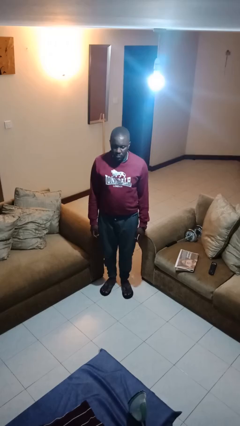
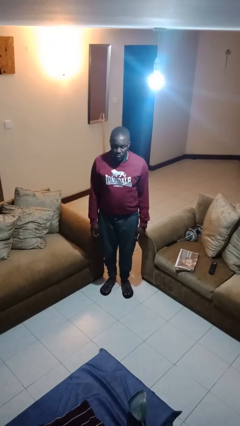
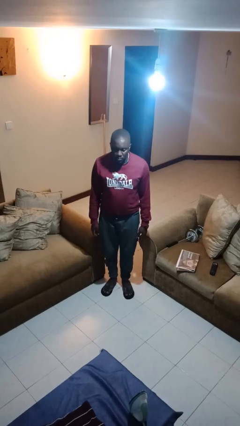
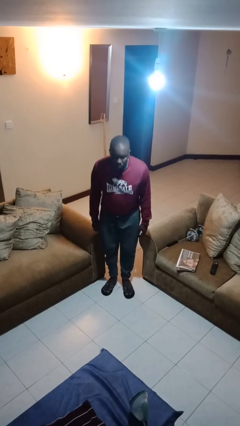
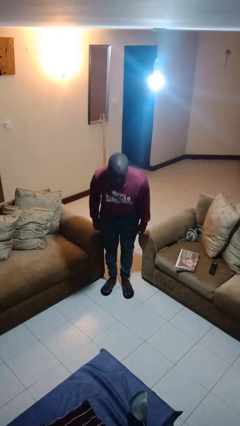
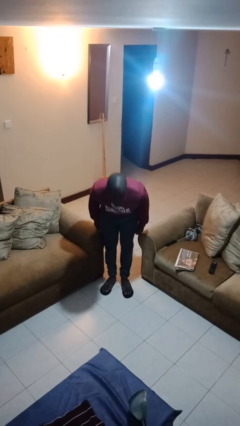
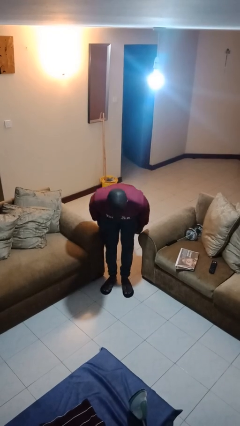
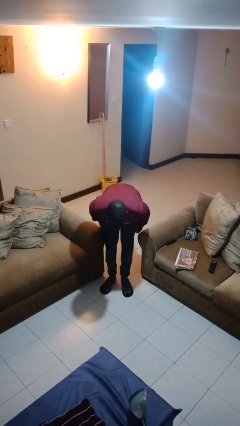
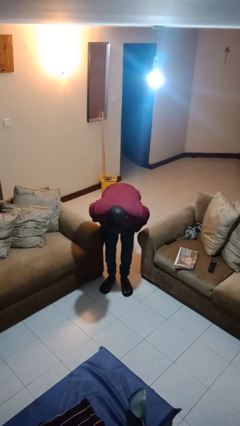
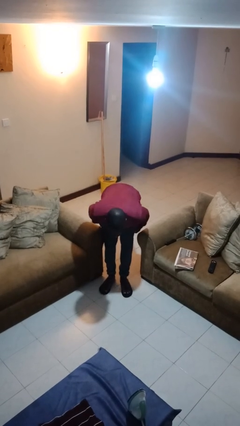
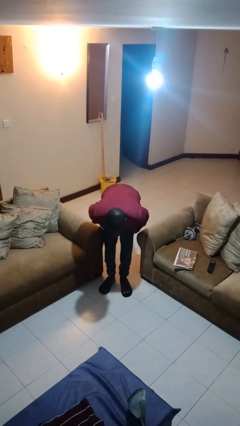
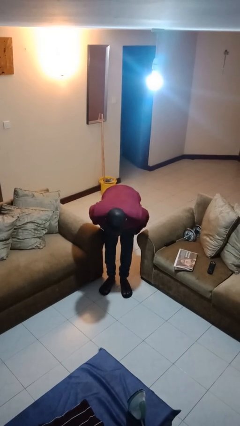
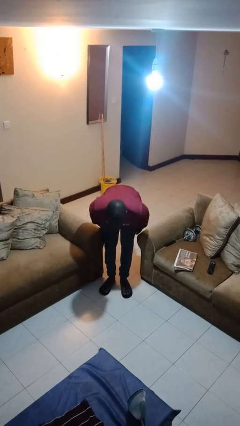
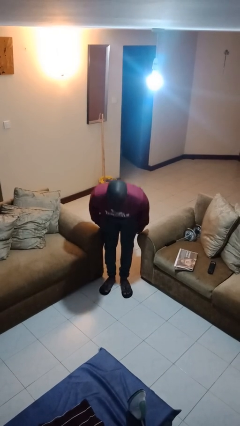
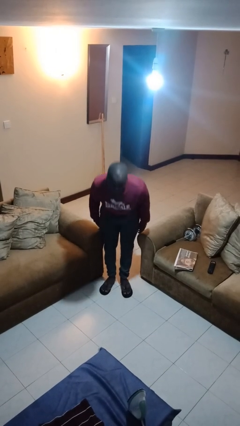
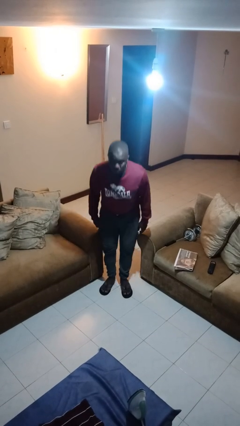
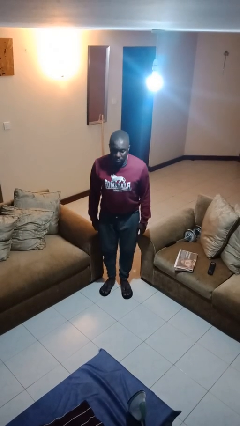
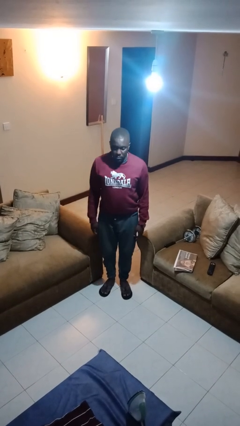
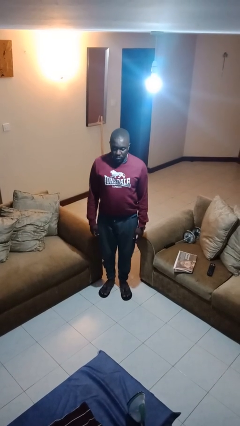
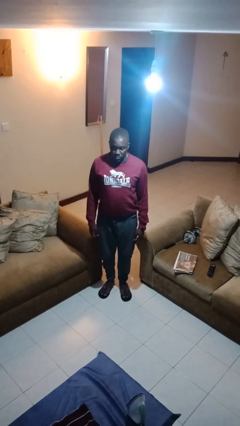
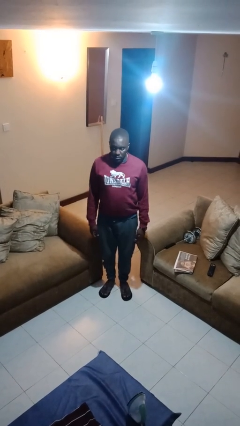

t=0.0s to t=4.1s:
person bows

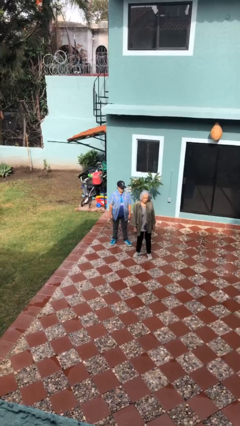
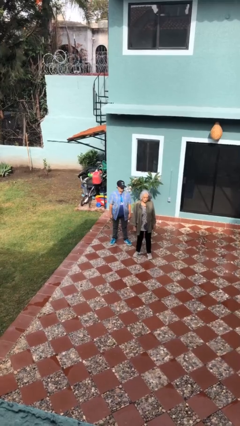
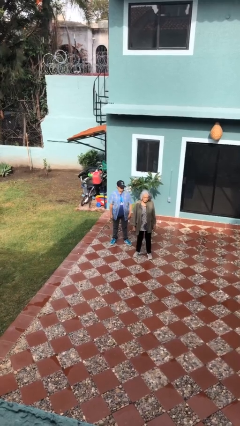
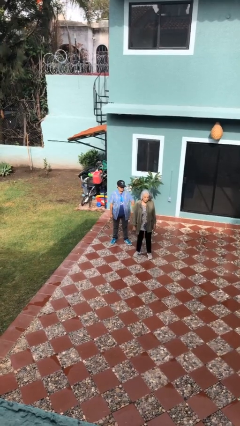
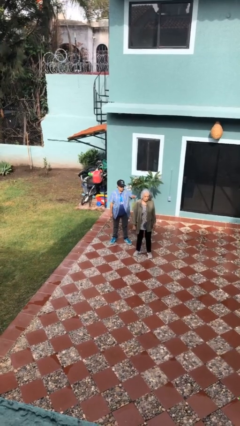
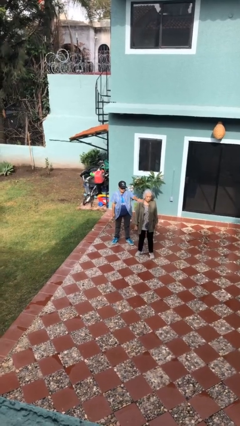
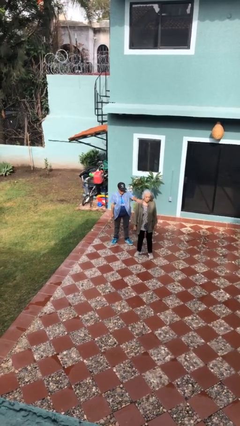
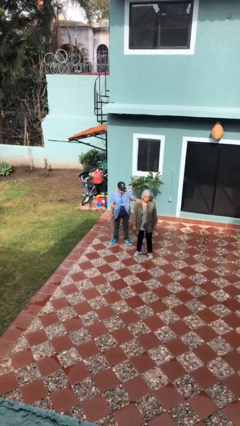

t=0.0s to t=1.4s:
person grabs person by shoulder

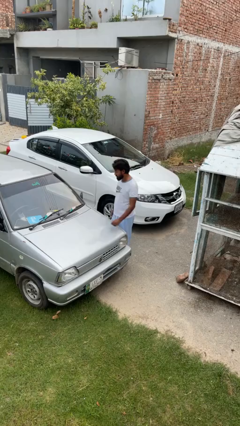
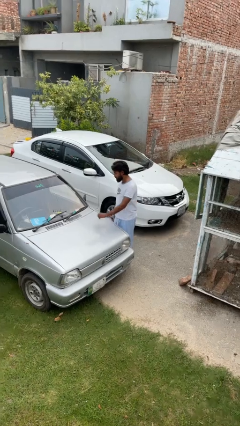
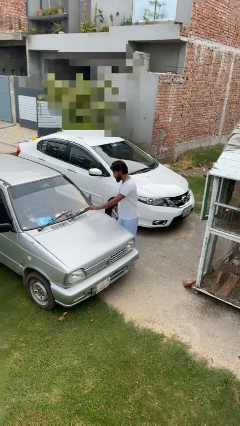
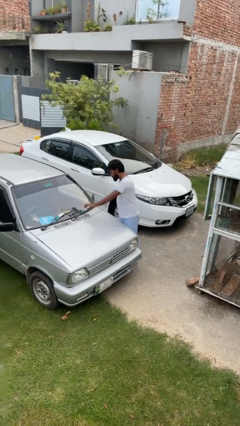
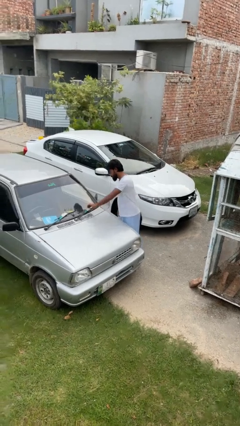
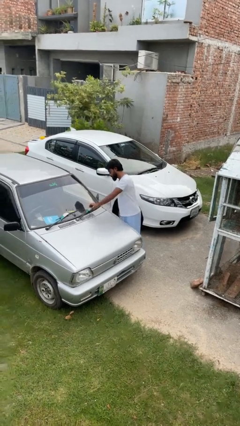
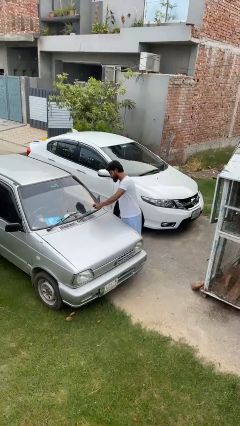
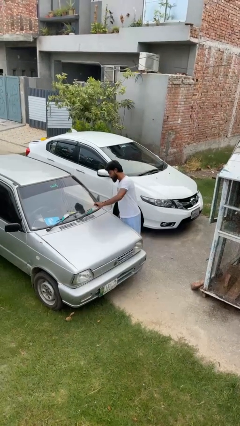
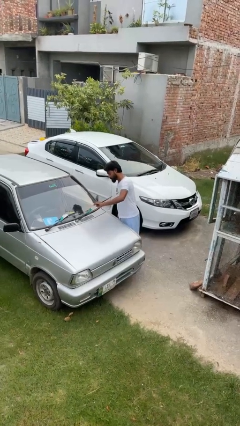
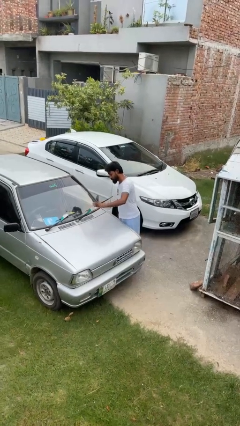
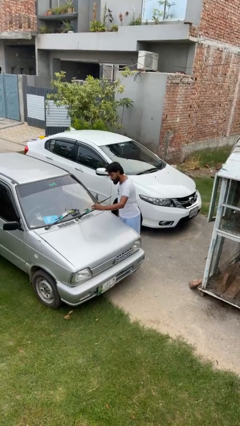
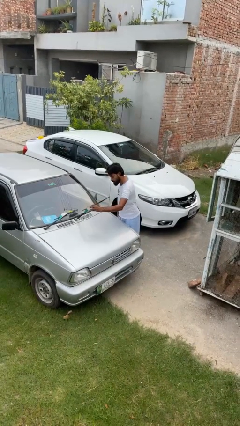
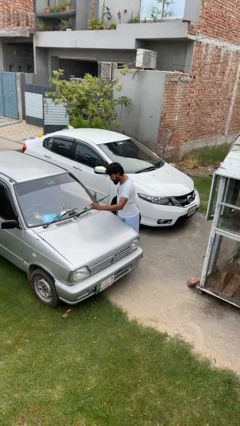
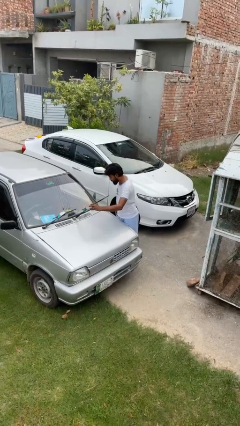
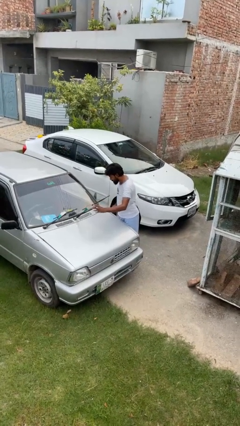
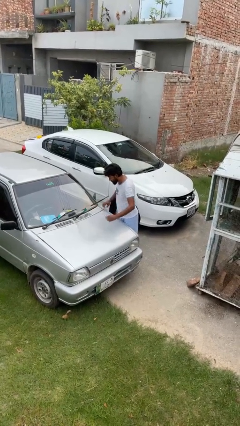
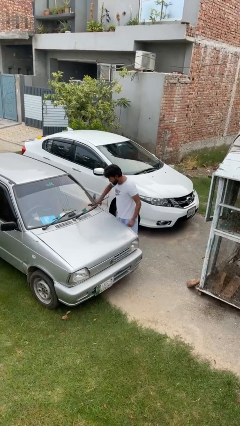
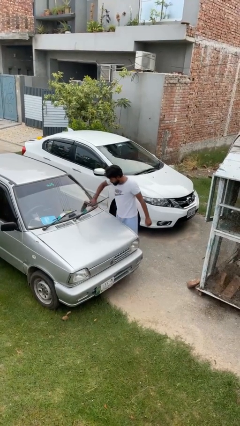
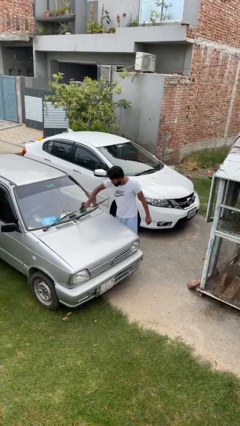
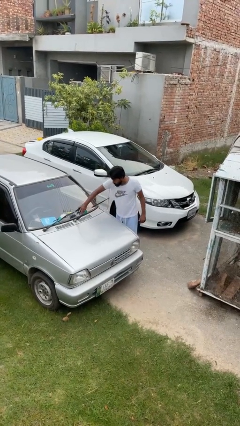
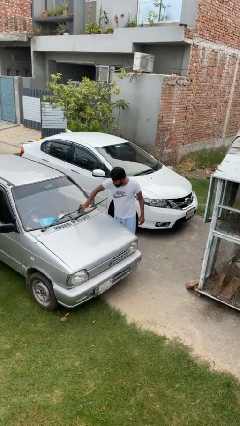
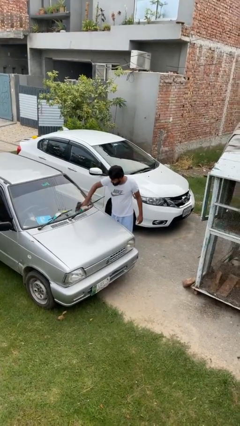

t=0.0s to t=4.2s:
person flips up car wipers

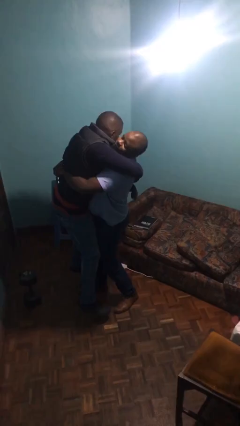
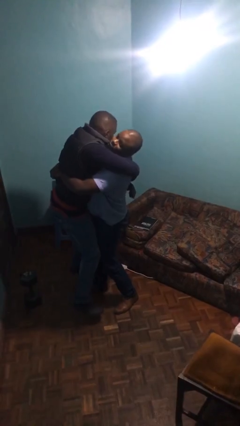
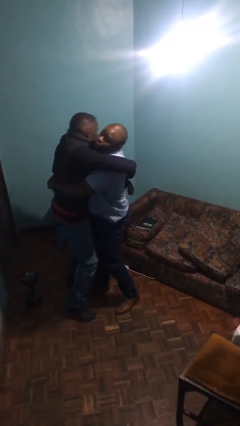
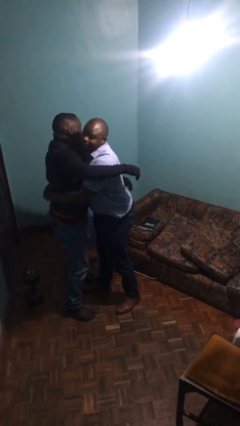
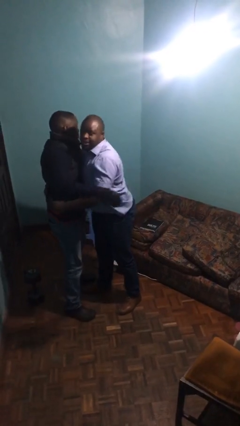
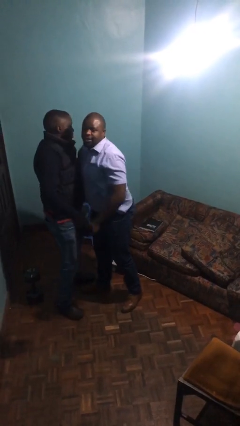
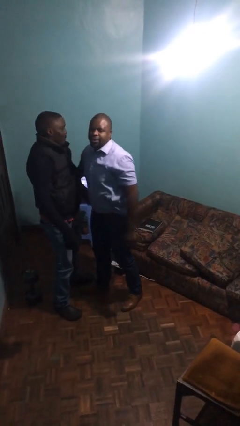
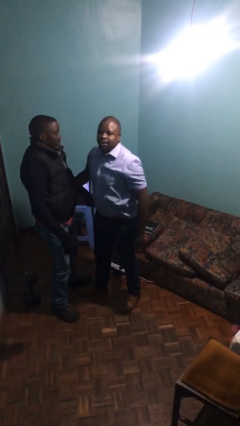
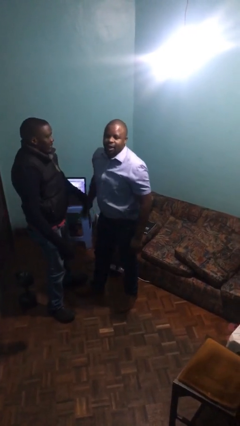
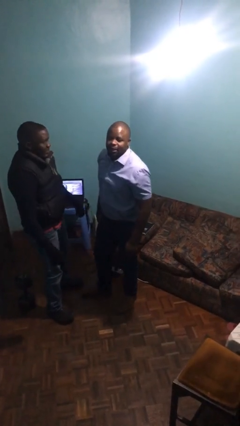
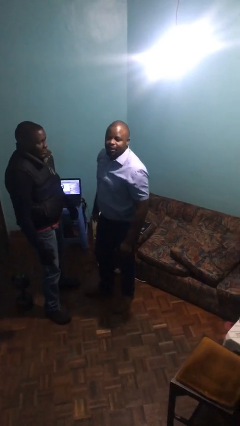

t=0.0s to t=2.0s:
person puts down person

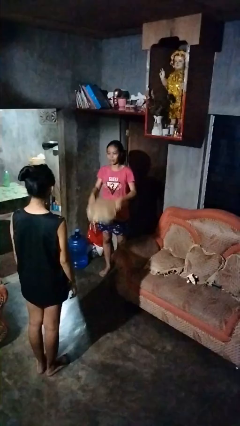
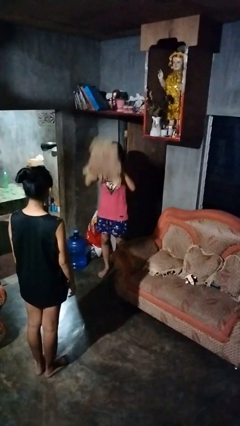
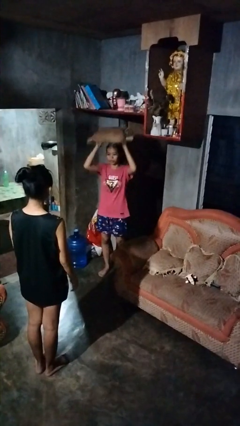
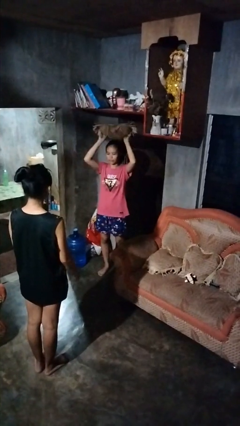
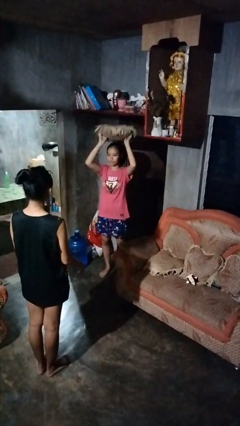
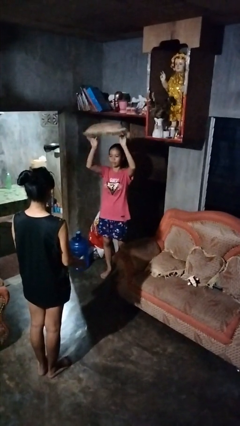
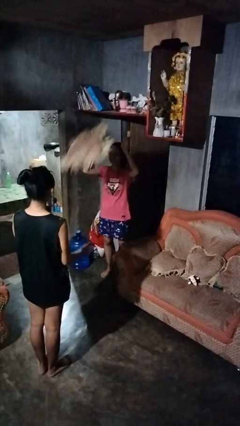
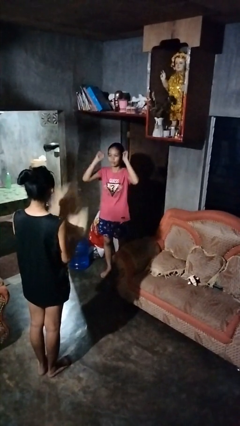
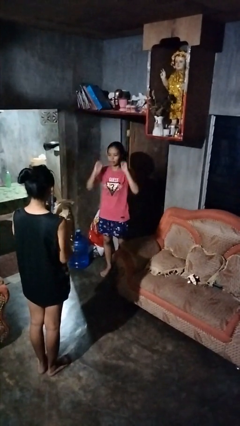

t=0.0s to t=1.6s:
person throws object to person

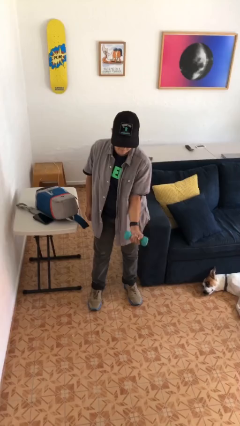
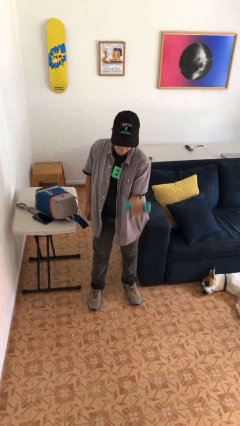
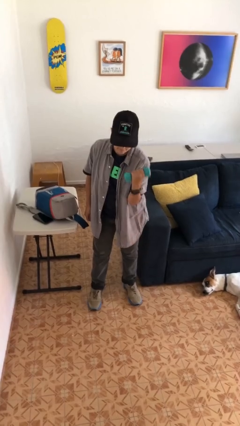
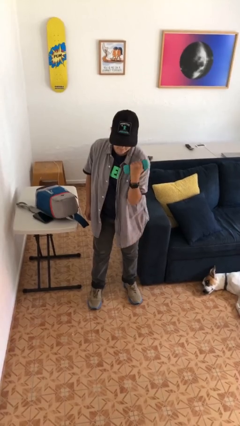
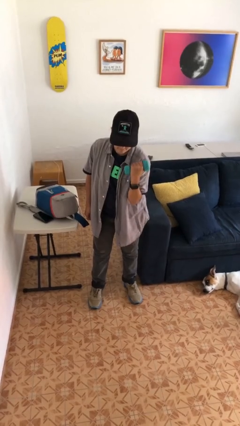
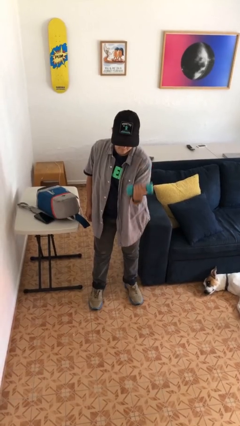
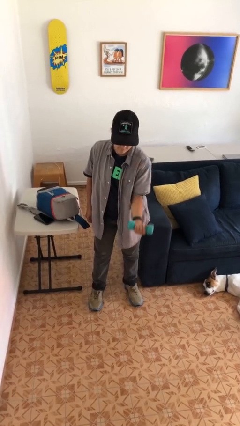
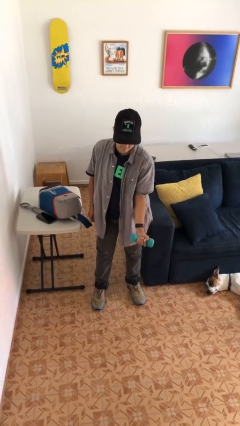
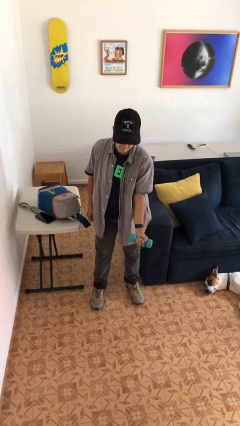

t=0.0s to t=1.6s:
person lifts dumbbells

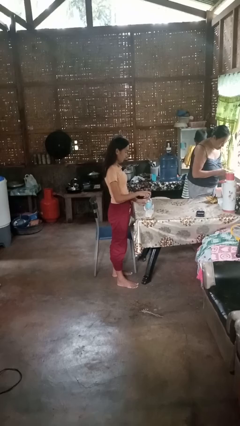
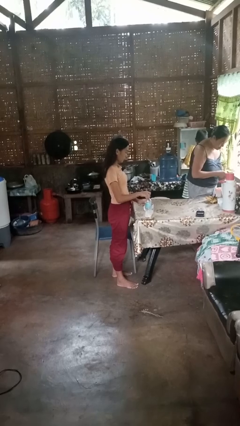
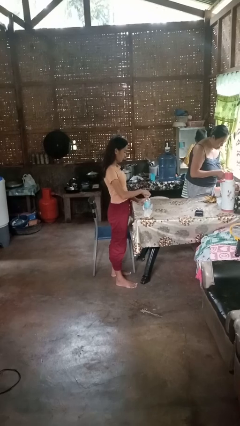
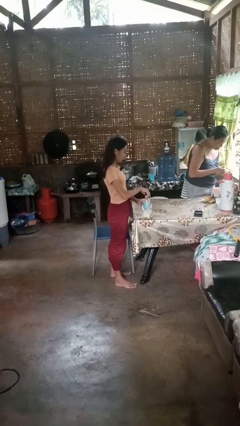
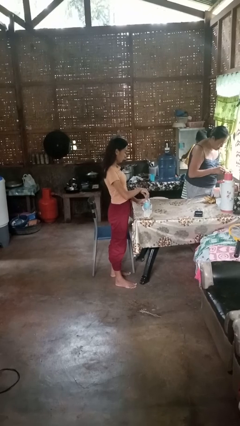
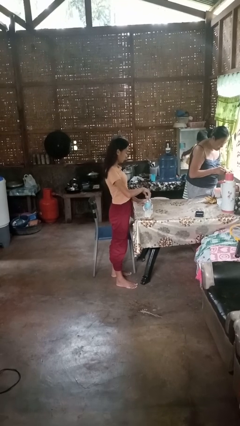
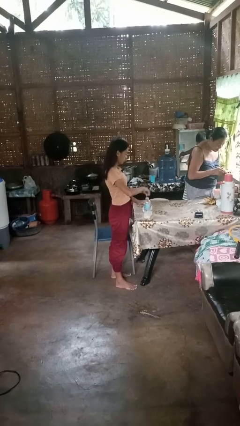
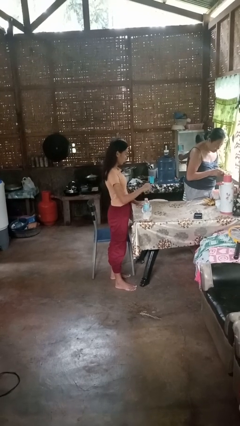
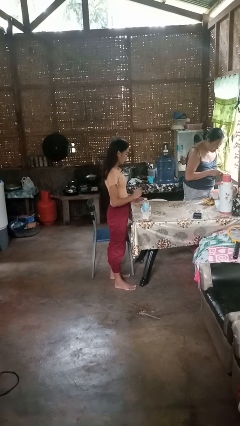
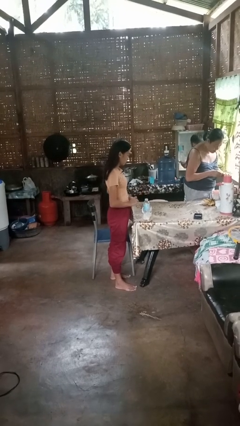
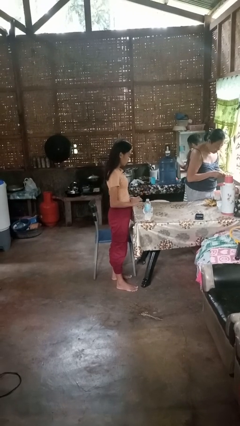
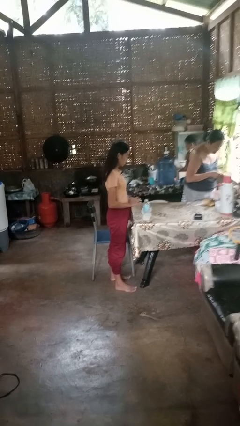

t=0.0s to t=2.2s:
person unscrews lid from bottle

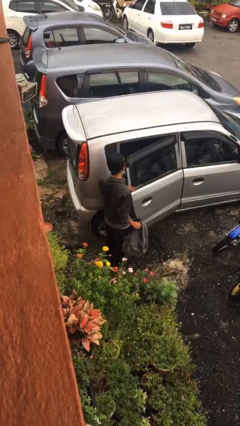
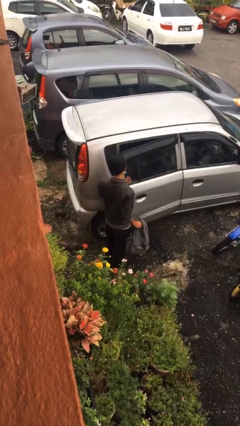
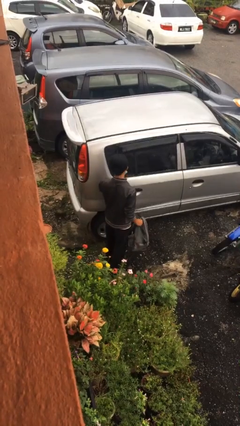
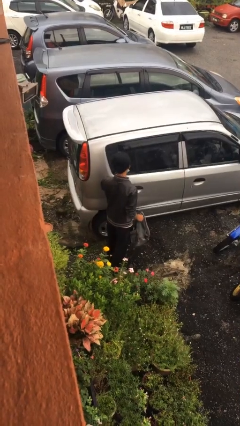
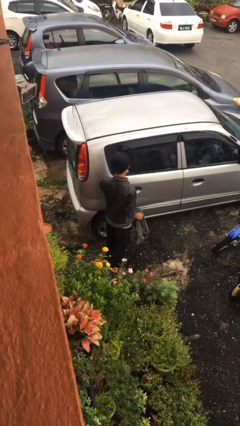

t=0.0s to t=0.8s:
person closes car door
